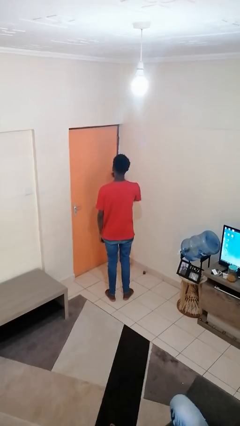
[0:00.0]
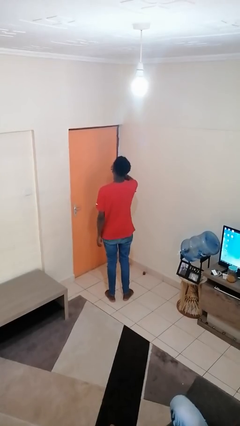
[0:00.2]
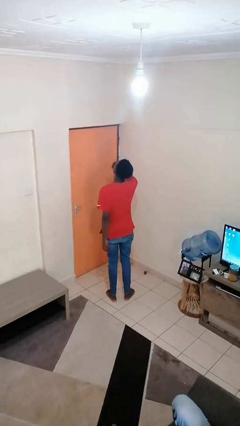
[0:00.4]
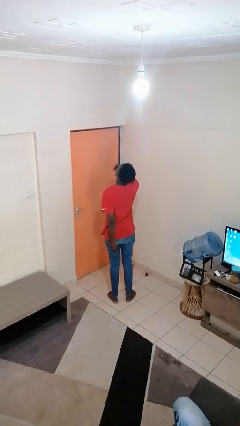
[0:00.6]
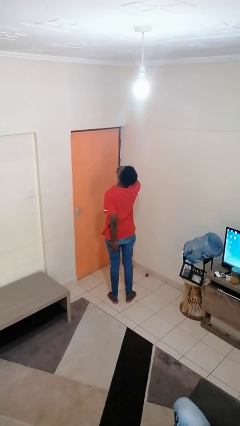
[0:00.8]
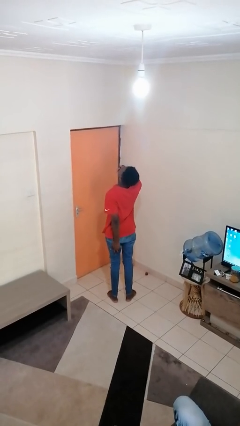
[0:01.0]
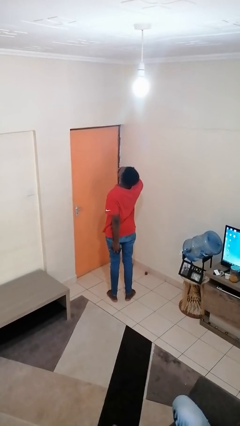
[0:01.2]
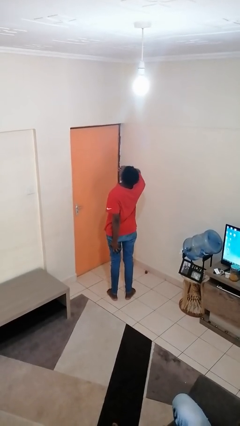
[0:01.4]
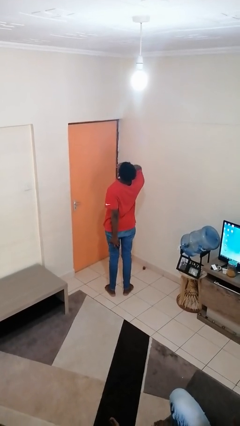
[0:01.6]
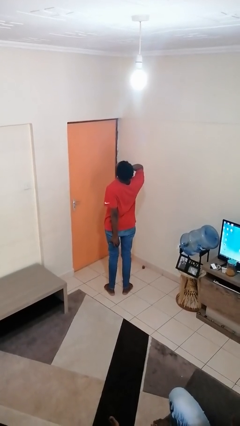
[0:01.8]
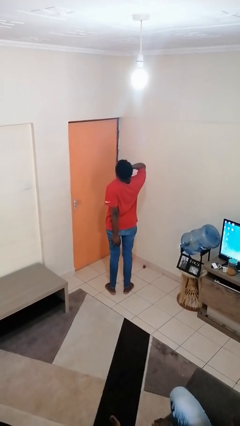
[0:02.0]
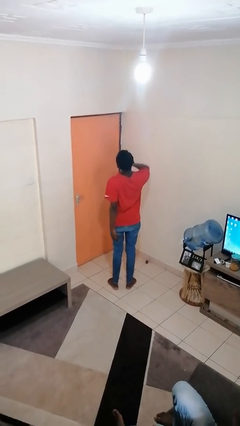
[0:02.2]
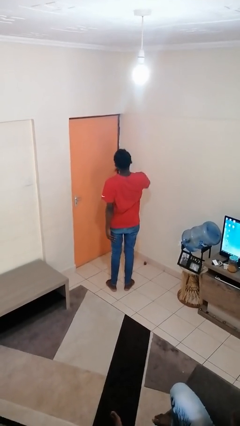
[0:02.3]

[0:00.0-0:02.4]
person yawns

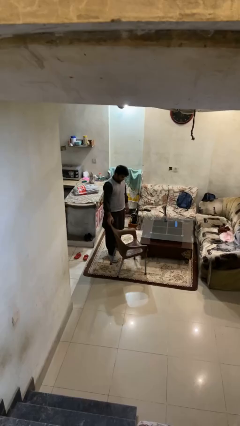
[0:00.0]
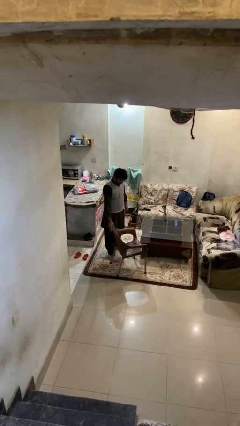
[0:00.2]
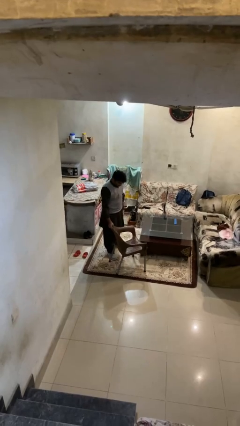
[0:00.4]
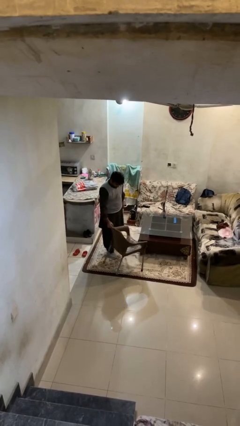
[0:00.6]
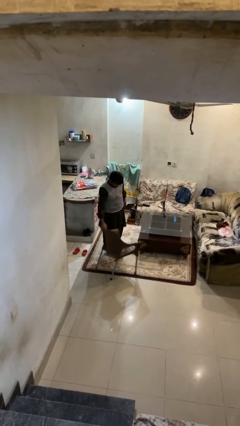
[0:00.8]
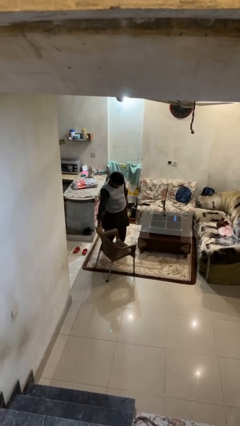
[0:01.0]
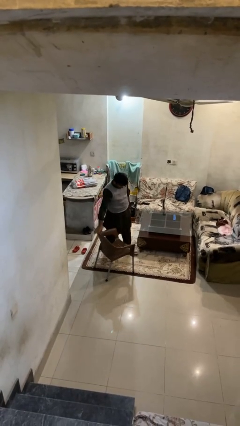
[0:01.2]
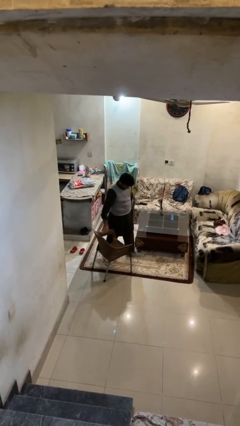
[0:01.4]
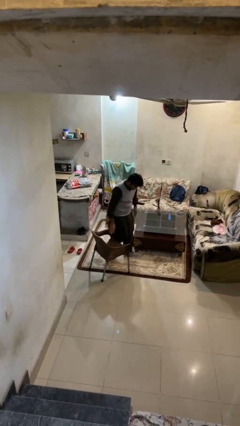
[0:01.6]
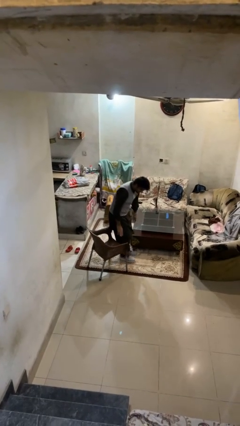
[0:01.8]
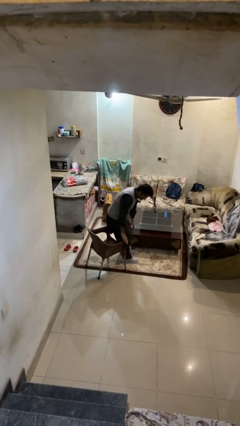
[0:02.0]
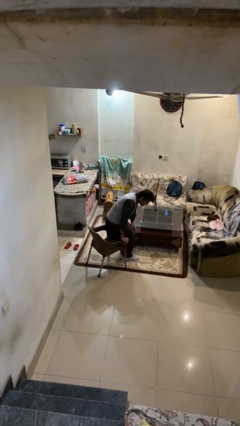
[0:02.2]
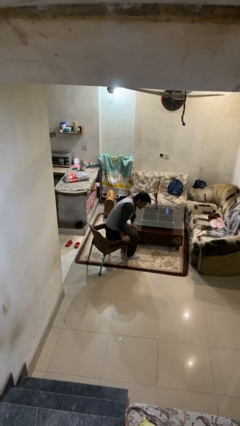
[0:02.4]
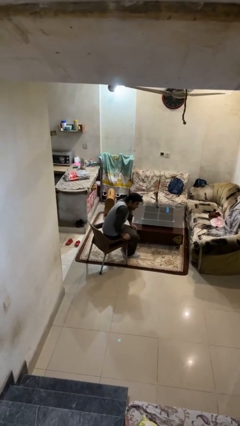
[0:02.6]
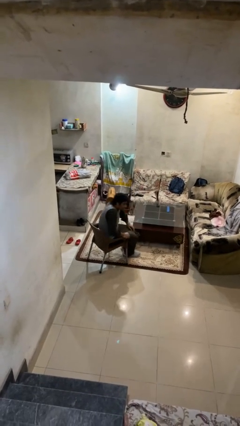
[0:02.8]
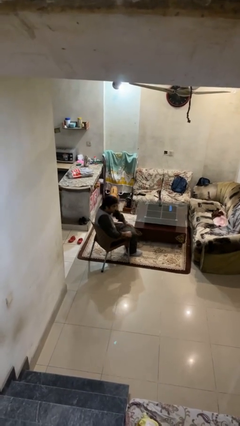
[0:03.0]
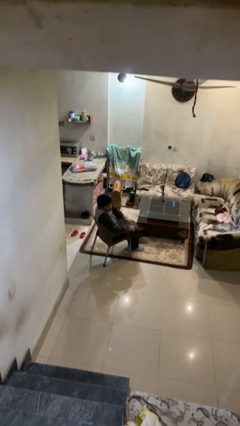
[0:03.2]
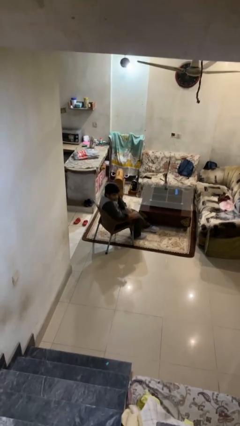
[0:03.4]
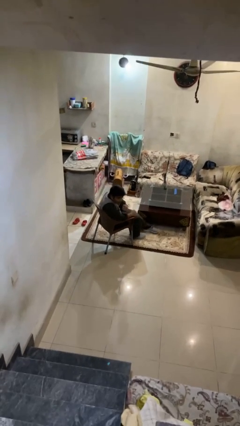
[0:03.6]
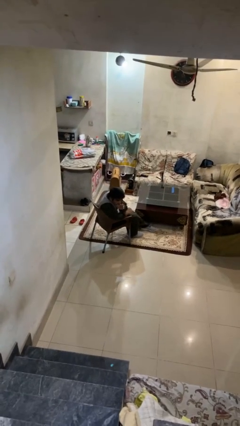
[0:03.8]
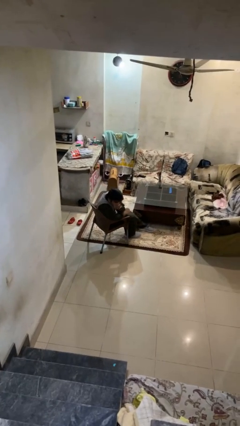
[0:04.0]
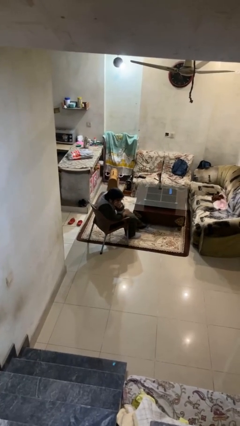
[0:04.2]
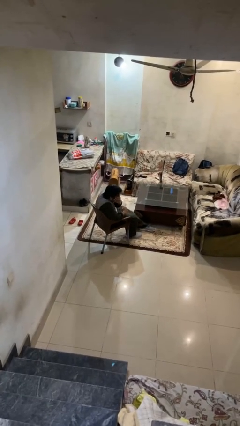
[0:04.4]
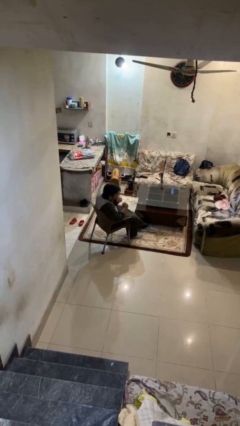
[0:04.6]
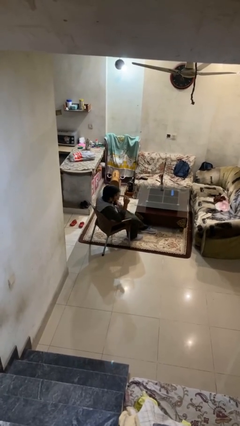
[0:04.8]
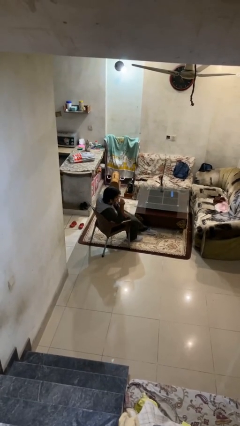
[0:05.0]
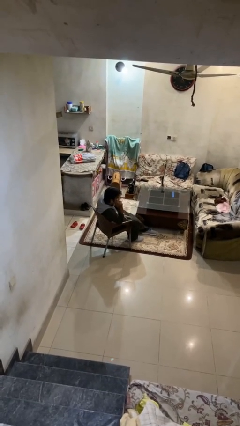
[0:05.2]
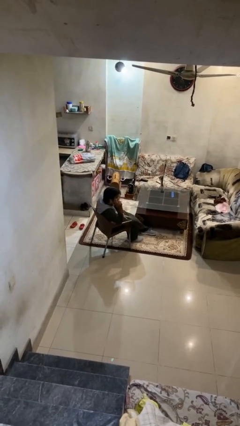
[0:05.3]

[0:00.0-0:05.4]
person sits down

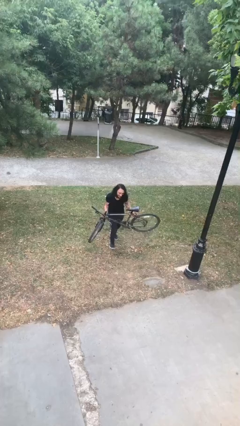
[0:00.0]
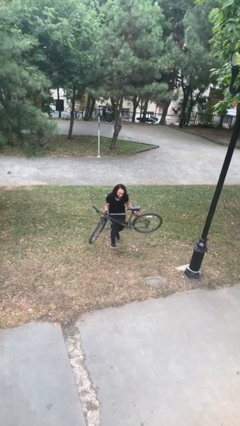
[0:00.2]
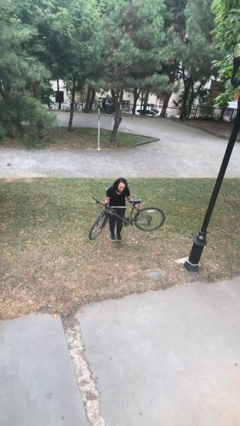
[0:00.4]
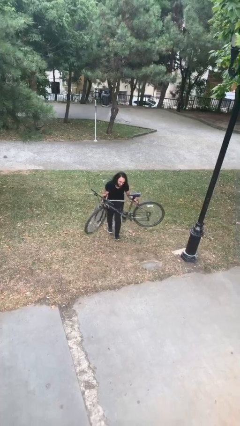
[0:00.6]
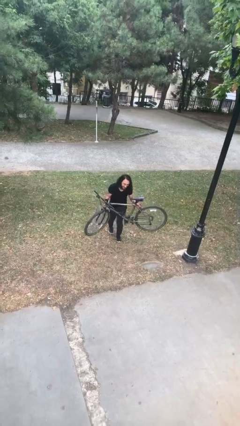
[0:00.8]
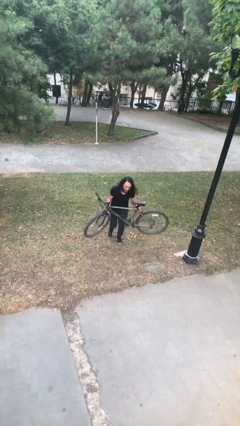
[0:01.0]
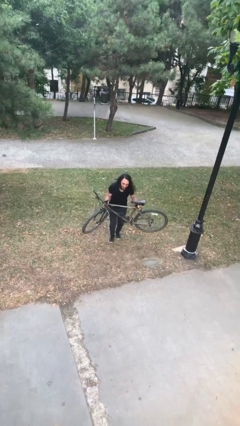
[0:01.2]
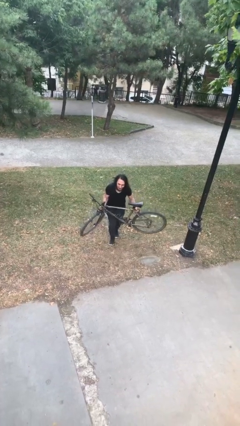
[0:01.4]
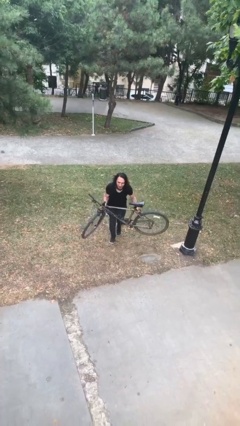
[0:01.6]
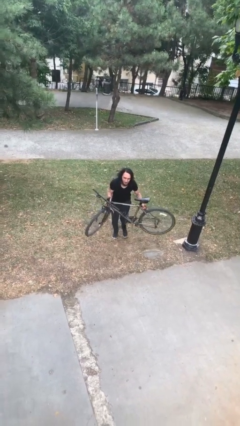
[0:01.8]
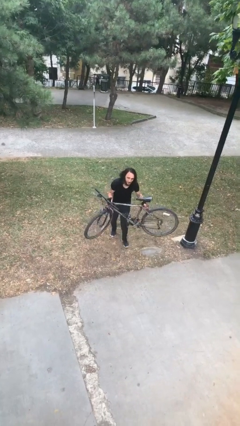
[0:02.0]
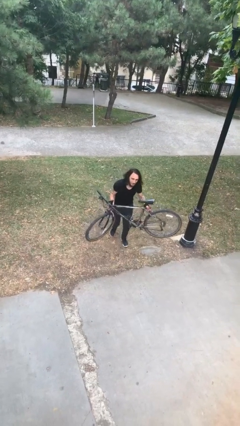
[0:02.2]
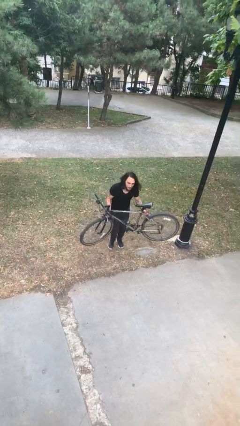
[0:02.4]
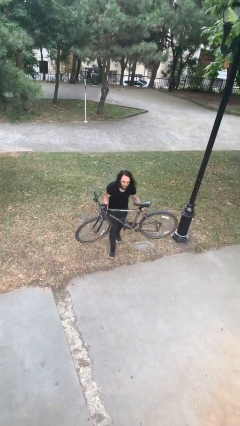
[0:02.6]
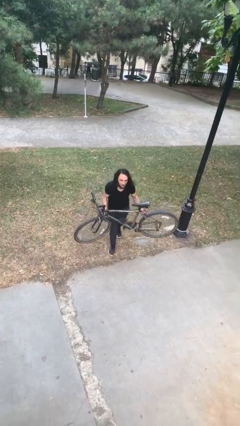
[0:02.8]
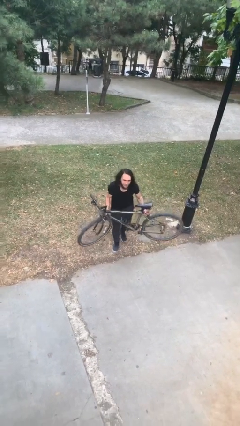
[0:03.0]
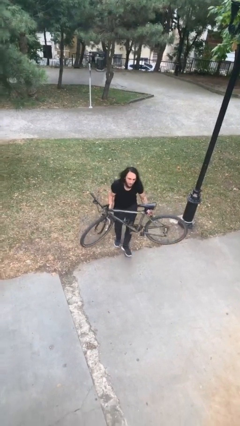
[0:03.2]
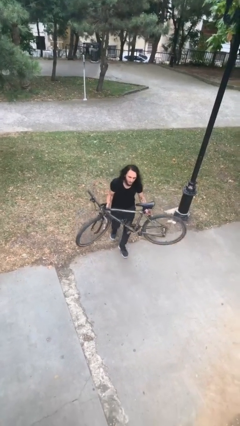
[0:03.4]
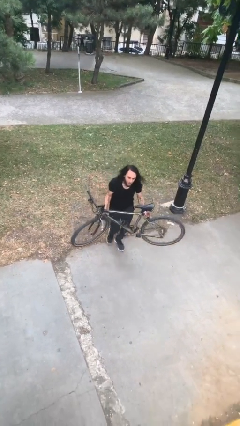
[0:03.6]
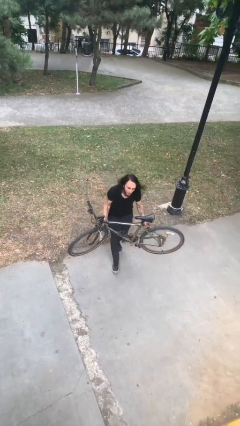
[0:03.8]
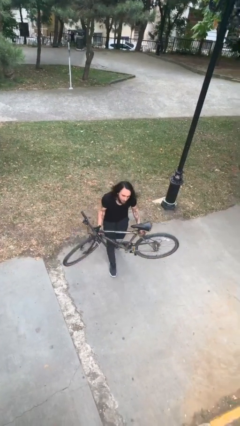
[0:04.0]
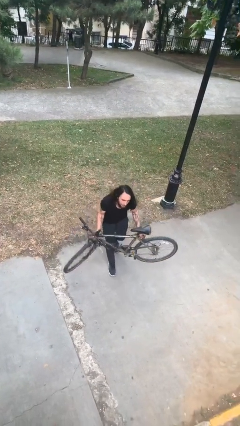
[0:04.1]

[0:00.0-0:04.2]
person carries heavy object

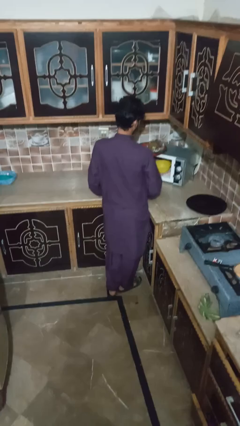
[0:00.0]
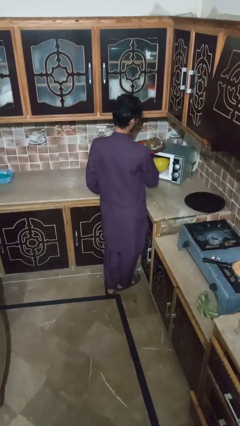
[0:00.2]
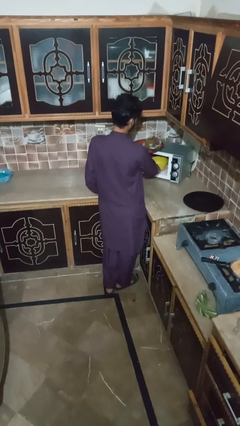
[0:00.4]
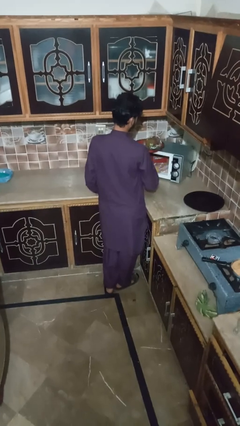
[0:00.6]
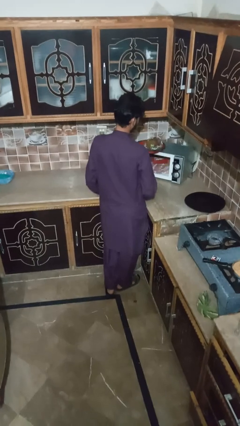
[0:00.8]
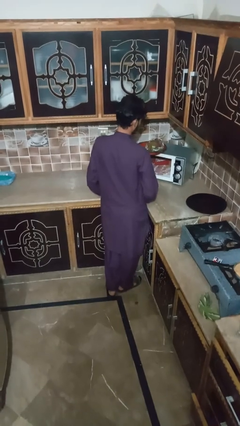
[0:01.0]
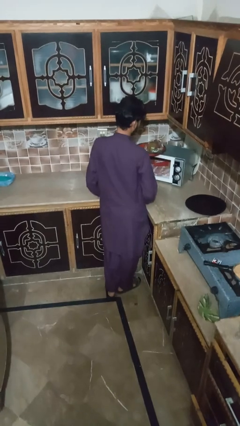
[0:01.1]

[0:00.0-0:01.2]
person takes object from microwave

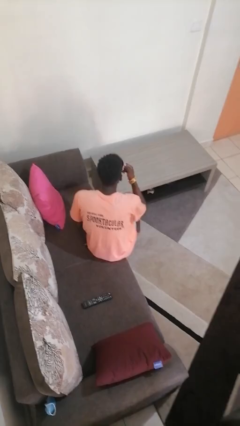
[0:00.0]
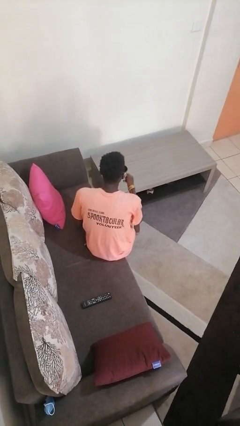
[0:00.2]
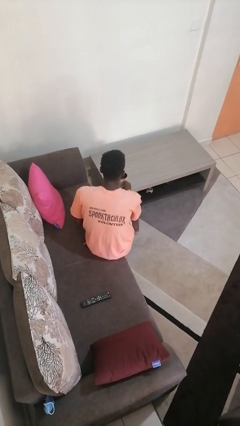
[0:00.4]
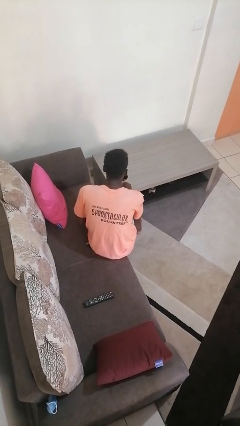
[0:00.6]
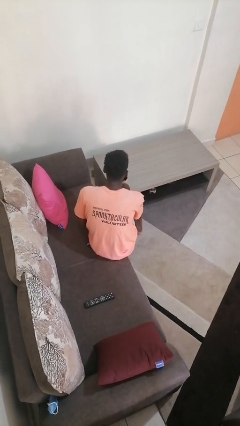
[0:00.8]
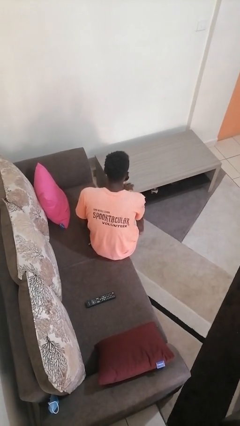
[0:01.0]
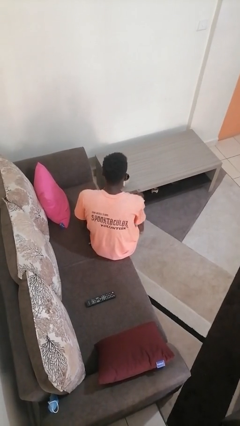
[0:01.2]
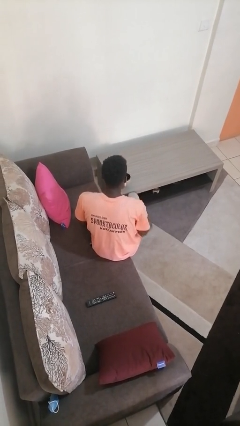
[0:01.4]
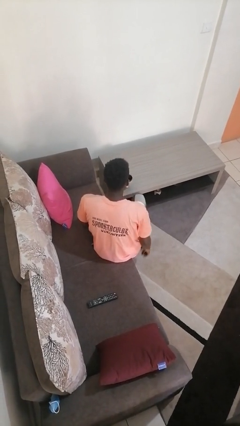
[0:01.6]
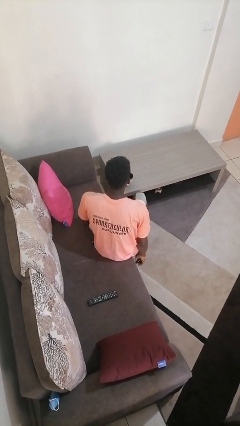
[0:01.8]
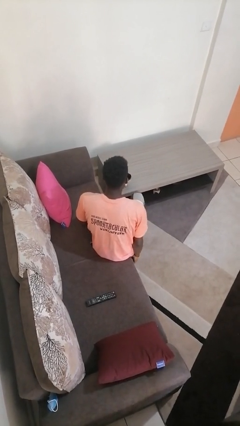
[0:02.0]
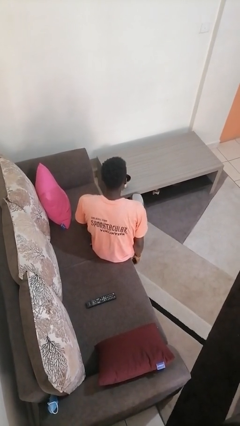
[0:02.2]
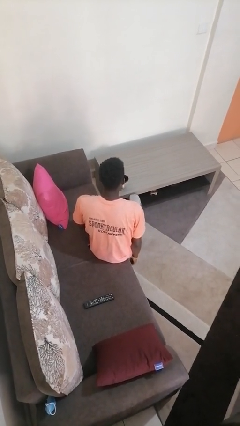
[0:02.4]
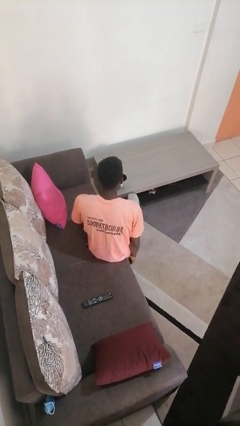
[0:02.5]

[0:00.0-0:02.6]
person puts down object on table

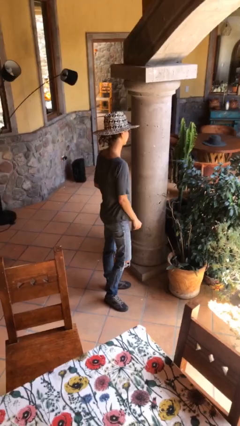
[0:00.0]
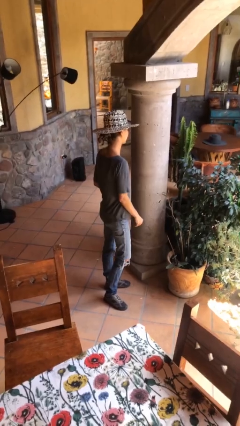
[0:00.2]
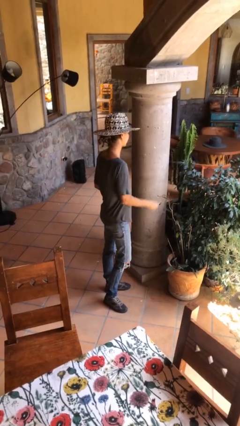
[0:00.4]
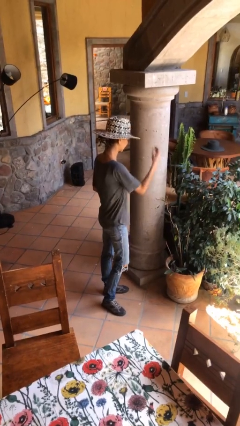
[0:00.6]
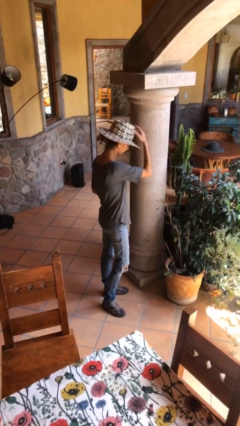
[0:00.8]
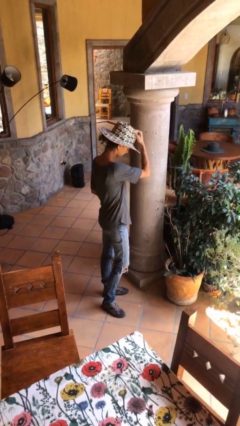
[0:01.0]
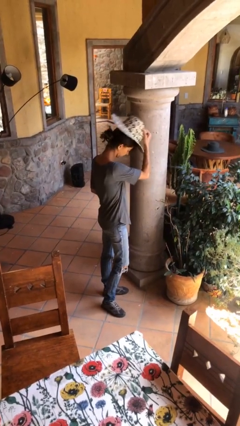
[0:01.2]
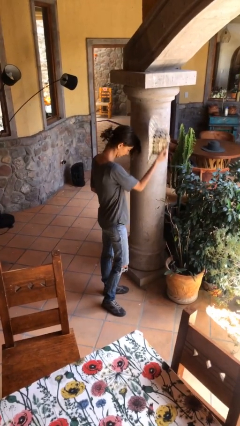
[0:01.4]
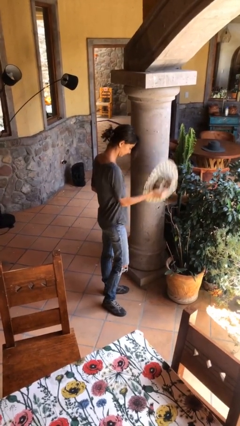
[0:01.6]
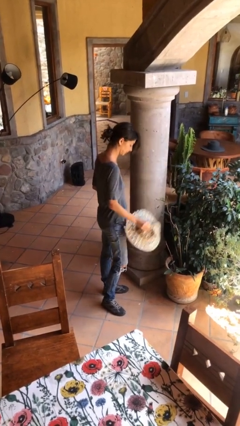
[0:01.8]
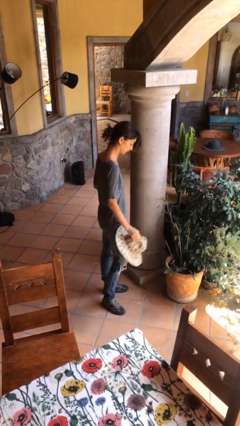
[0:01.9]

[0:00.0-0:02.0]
person takes off hat
